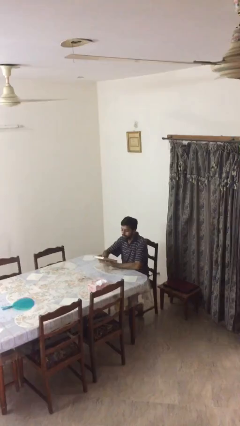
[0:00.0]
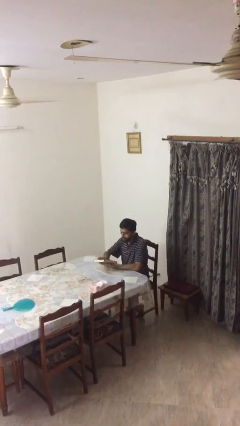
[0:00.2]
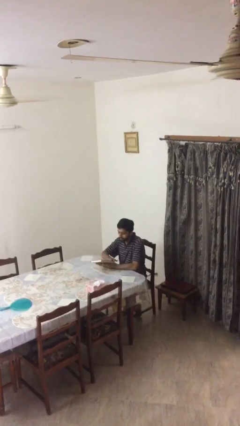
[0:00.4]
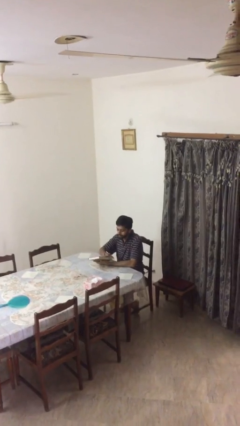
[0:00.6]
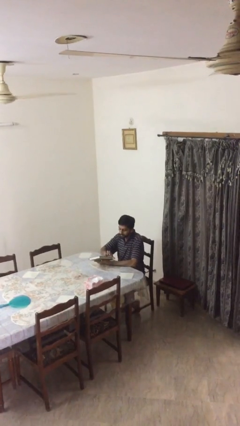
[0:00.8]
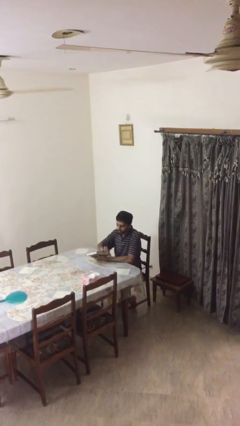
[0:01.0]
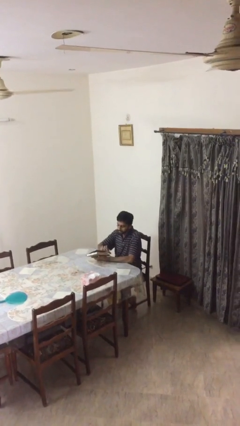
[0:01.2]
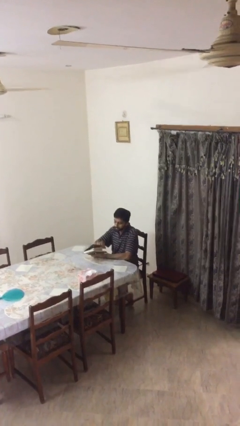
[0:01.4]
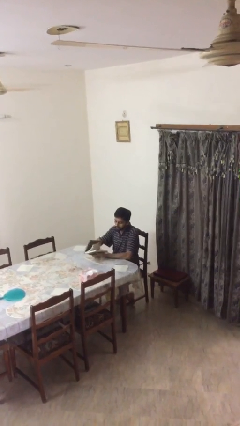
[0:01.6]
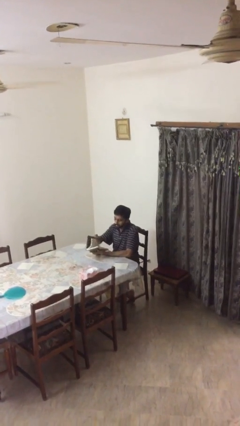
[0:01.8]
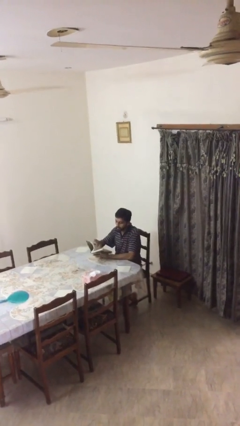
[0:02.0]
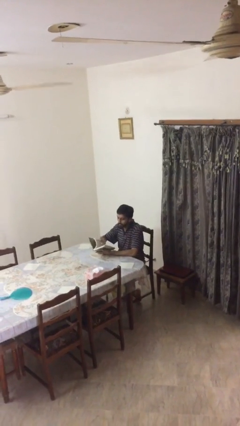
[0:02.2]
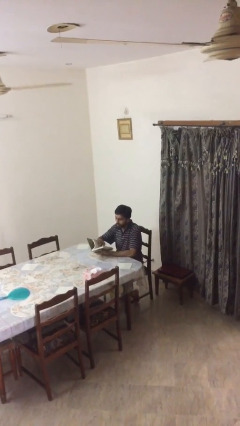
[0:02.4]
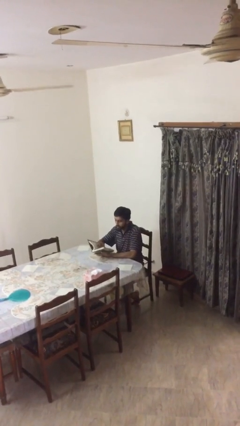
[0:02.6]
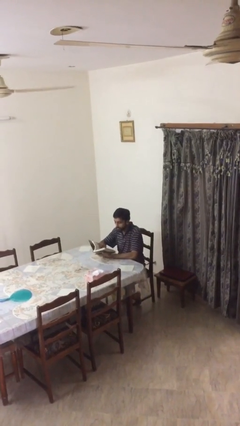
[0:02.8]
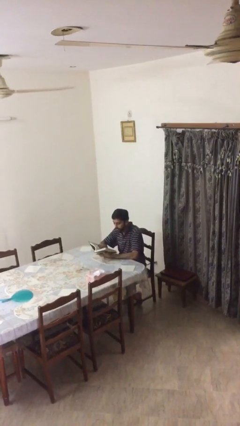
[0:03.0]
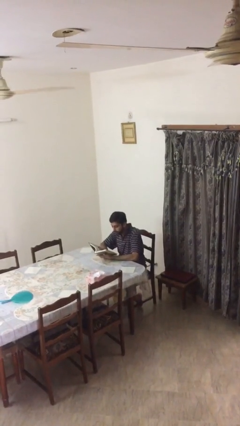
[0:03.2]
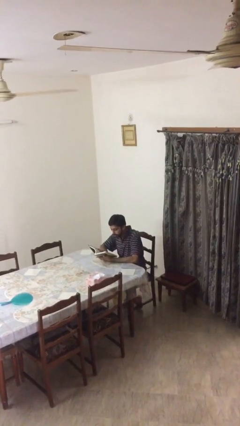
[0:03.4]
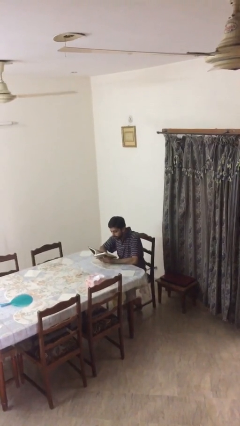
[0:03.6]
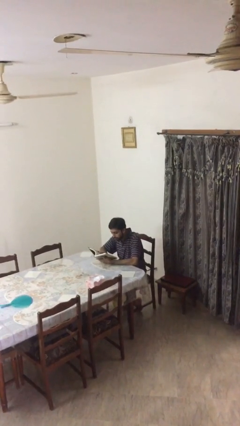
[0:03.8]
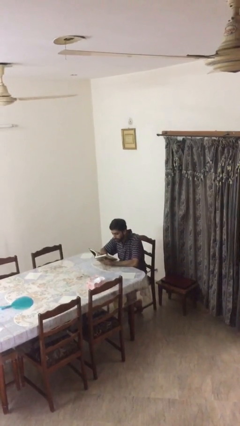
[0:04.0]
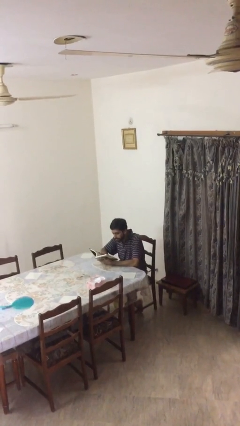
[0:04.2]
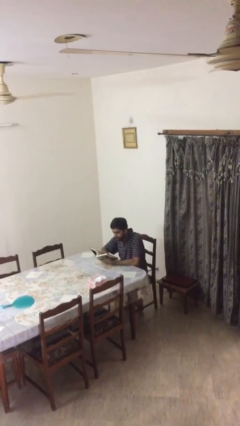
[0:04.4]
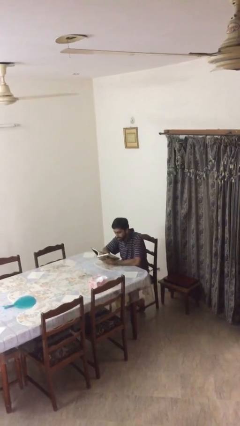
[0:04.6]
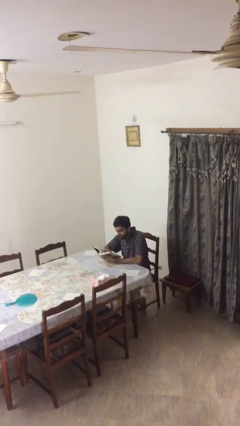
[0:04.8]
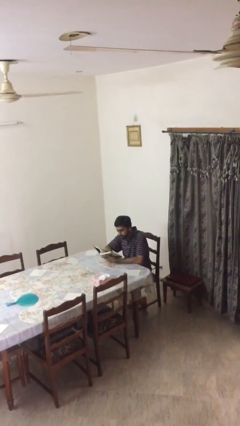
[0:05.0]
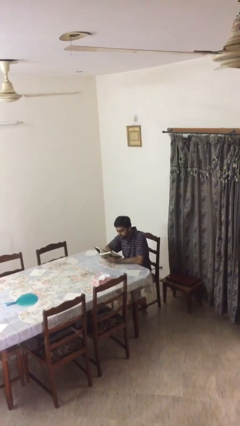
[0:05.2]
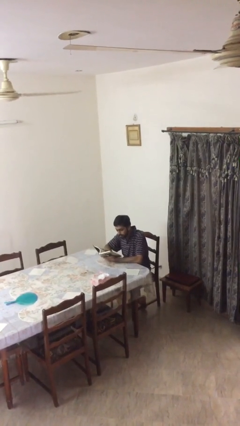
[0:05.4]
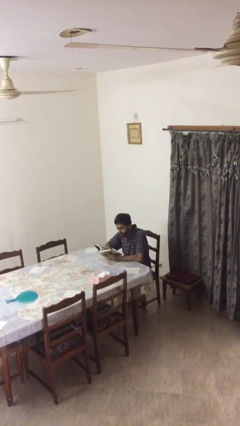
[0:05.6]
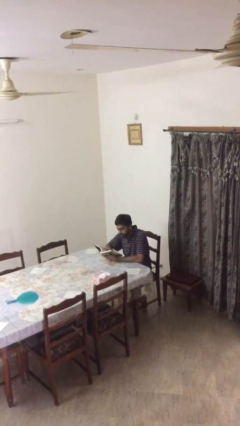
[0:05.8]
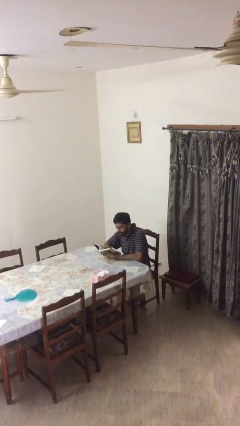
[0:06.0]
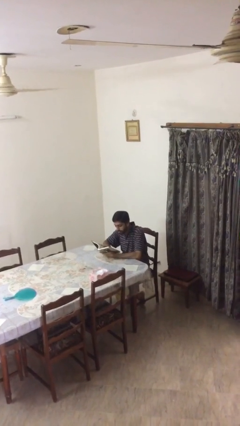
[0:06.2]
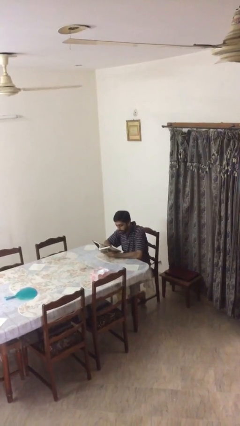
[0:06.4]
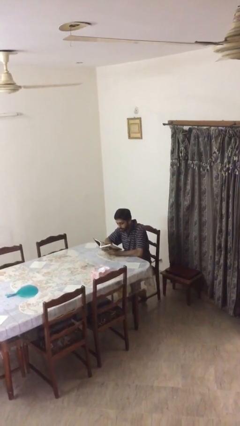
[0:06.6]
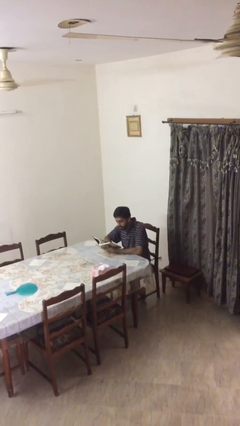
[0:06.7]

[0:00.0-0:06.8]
person reads document

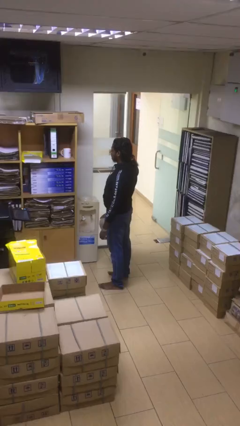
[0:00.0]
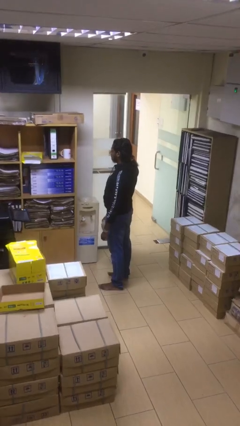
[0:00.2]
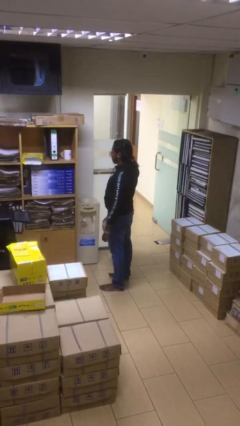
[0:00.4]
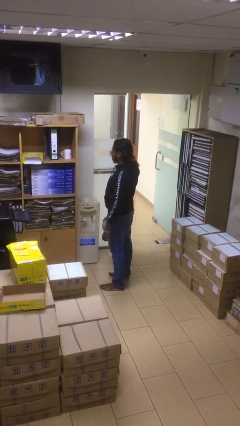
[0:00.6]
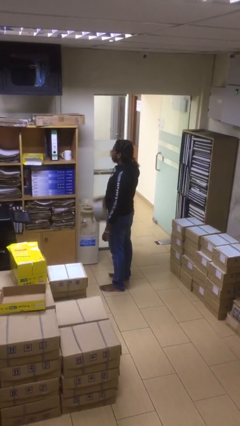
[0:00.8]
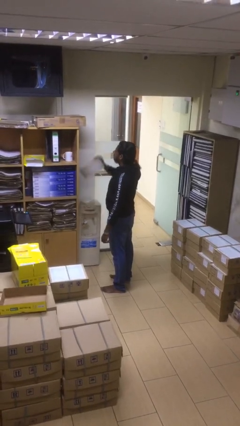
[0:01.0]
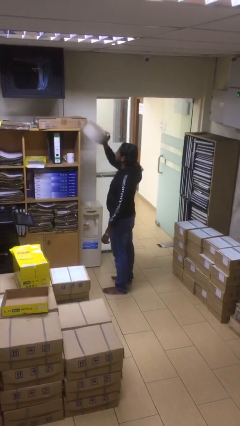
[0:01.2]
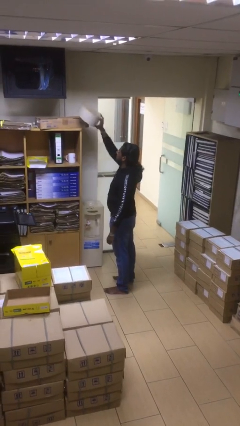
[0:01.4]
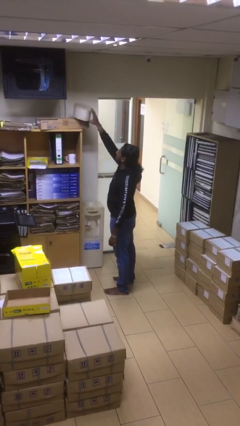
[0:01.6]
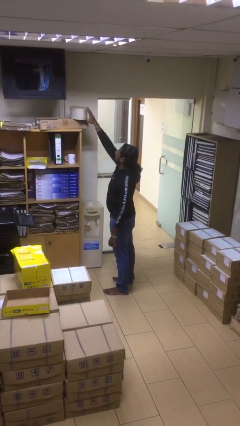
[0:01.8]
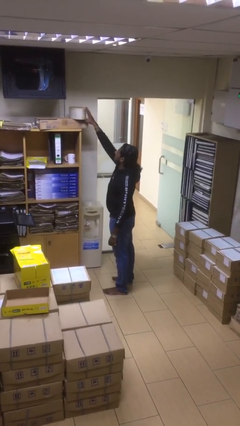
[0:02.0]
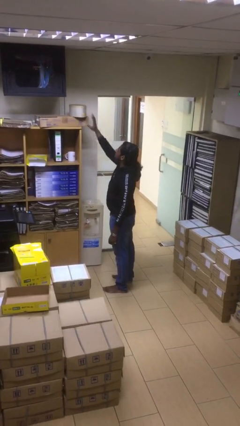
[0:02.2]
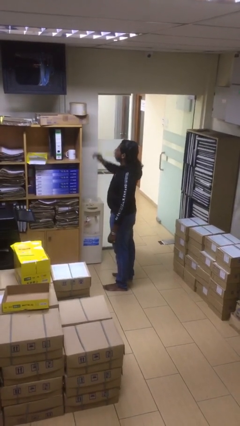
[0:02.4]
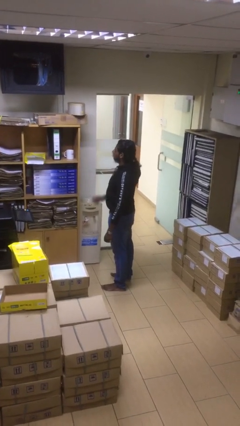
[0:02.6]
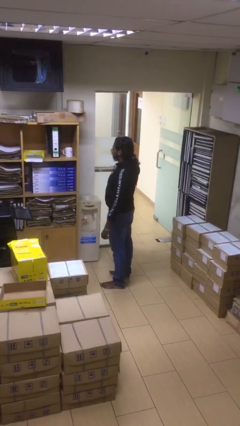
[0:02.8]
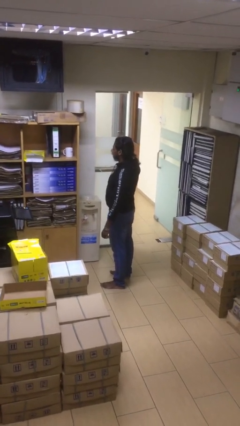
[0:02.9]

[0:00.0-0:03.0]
person puts down object on shelf

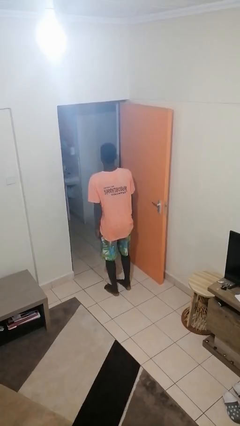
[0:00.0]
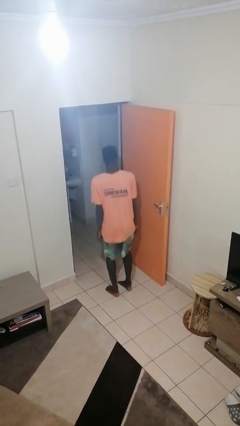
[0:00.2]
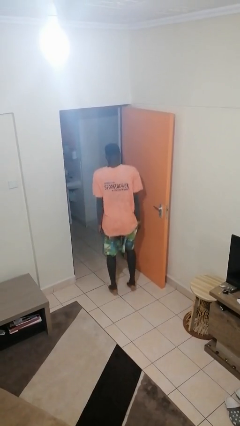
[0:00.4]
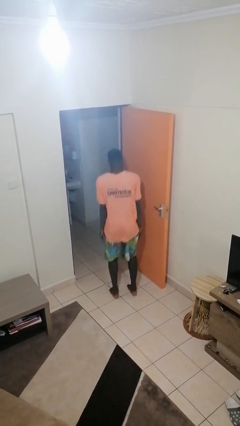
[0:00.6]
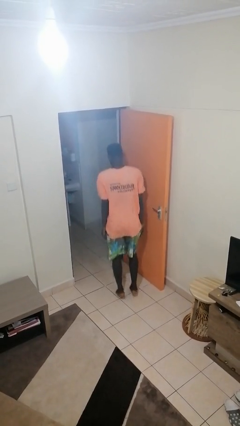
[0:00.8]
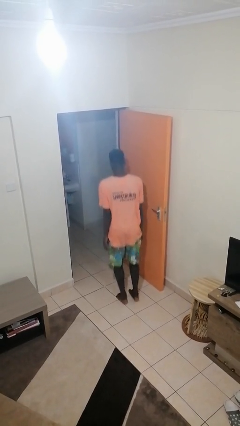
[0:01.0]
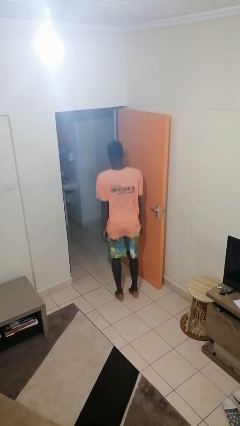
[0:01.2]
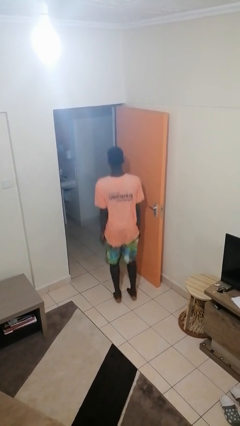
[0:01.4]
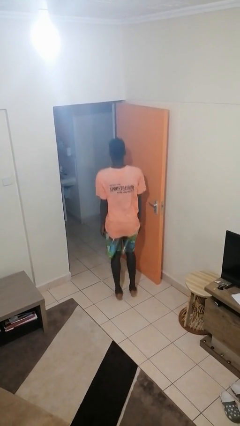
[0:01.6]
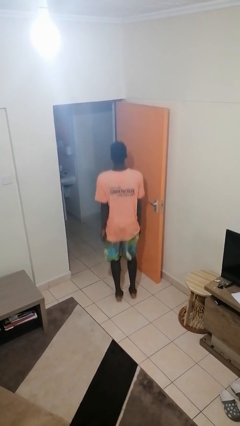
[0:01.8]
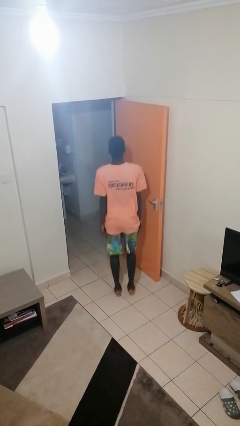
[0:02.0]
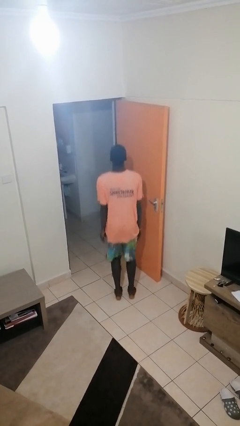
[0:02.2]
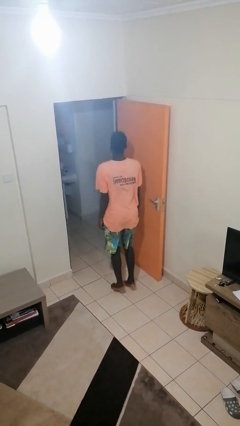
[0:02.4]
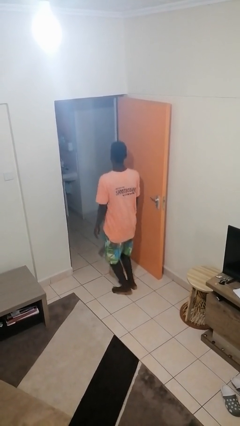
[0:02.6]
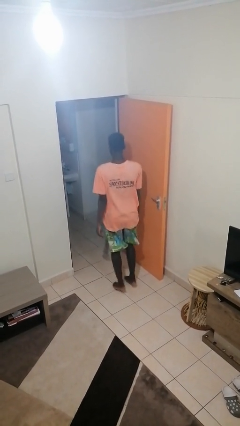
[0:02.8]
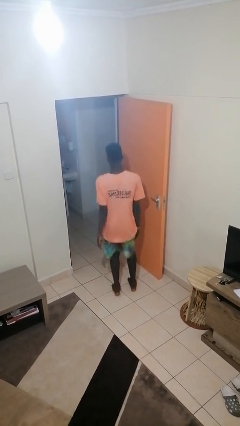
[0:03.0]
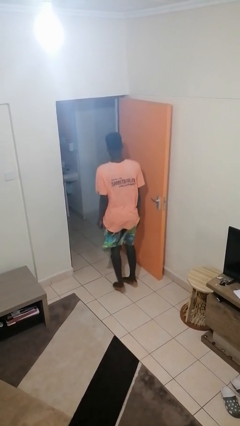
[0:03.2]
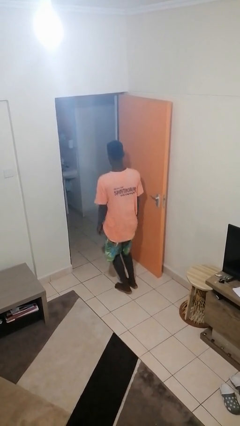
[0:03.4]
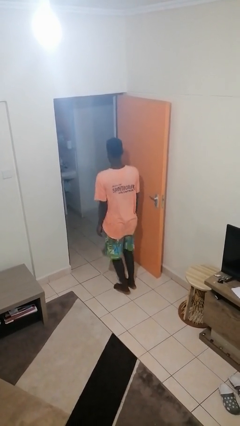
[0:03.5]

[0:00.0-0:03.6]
person jumps

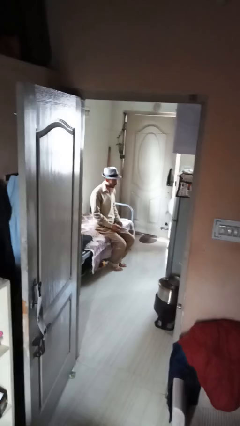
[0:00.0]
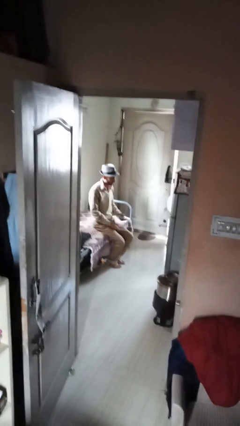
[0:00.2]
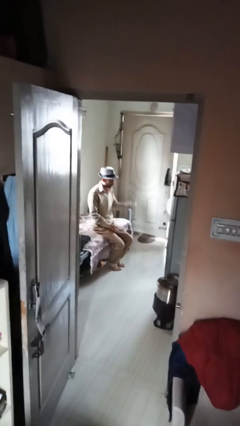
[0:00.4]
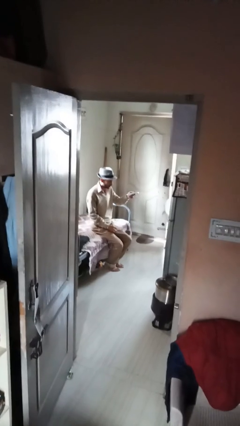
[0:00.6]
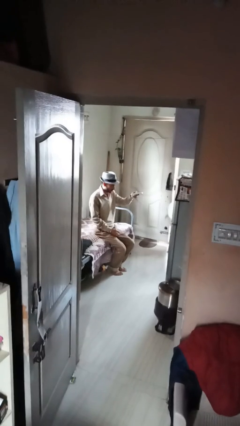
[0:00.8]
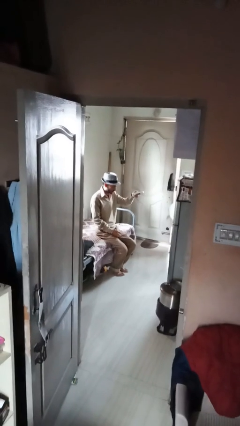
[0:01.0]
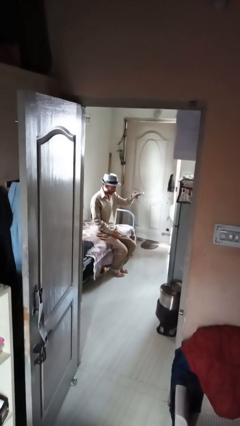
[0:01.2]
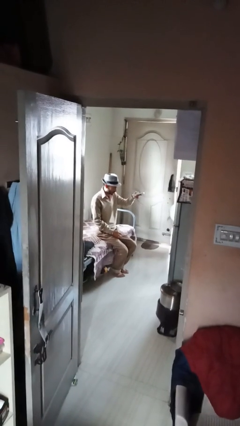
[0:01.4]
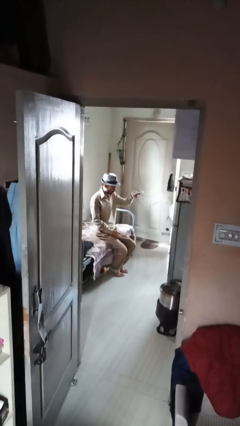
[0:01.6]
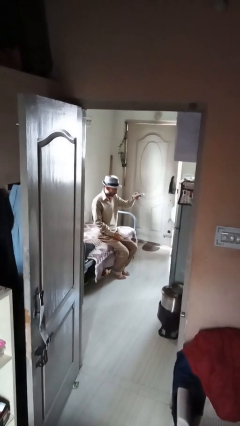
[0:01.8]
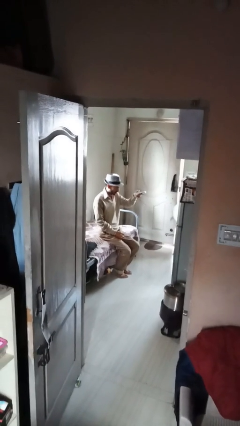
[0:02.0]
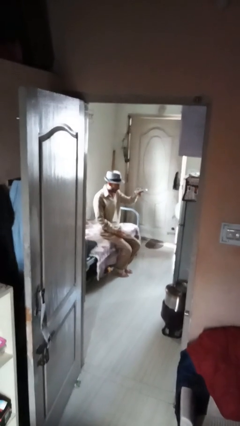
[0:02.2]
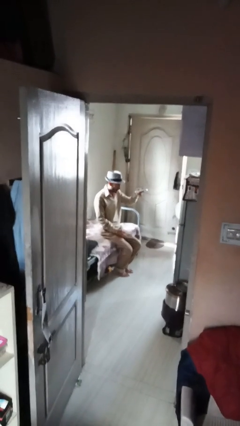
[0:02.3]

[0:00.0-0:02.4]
person uses television remote

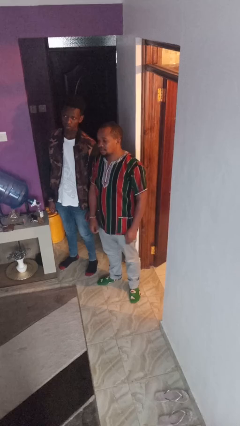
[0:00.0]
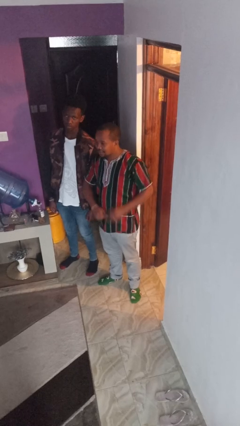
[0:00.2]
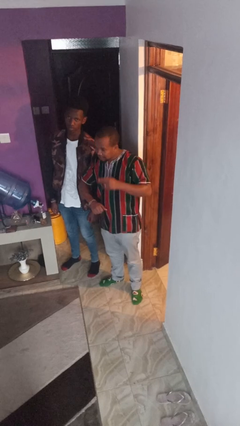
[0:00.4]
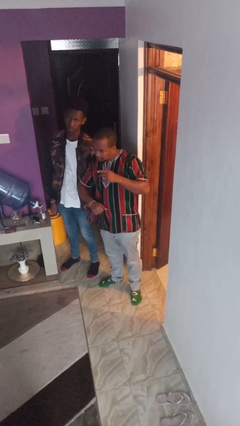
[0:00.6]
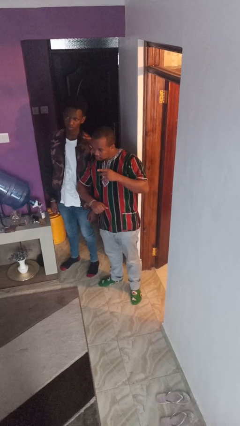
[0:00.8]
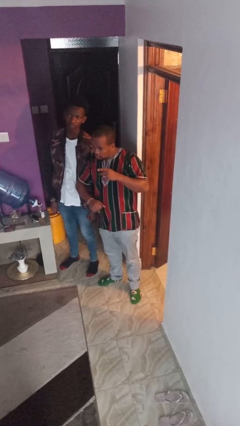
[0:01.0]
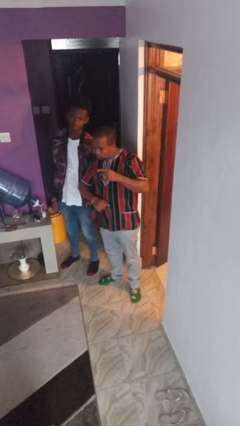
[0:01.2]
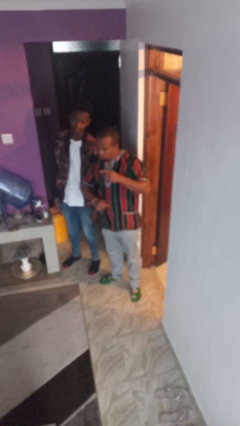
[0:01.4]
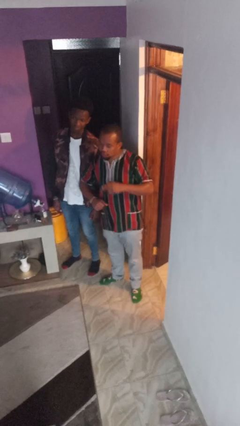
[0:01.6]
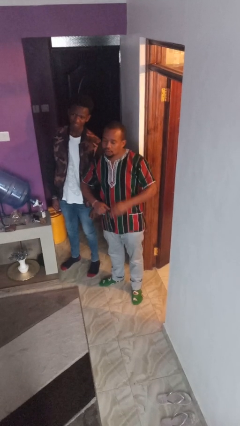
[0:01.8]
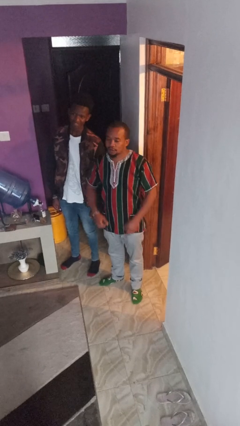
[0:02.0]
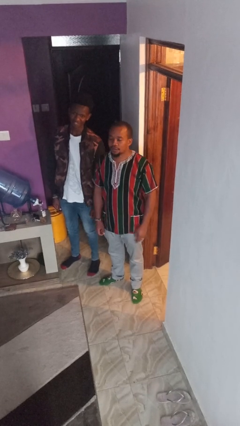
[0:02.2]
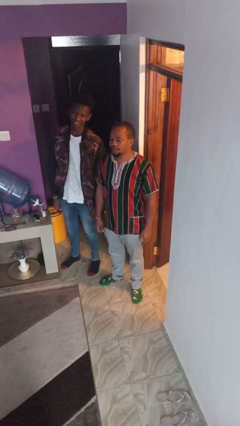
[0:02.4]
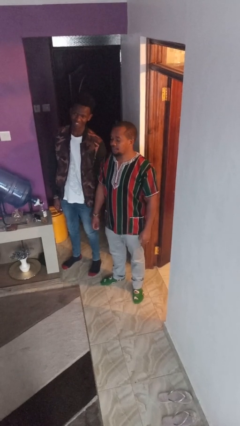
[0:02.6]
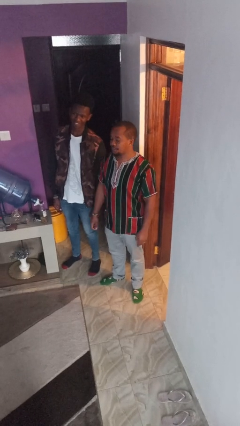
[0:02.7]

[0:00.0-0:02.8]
person nudges person with elbow
